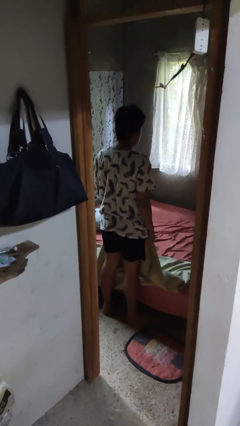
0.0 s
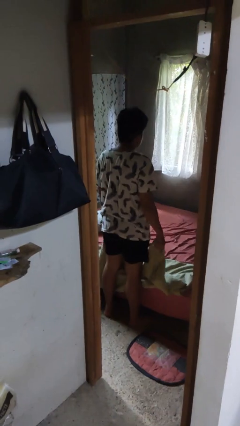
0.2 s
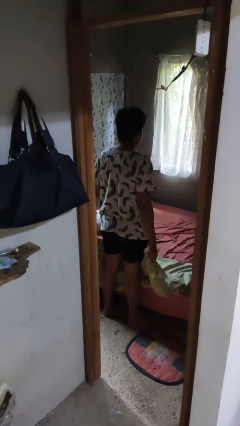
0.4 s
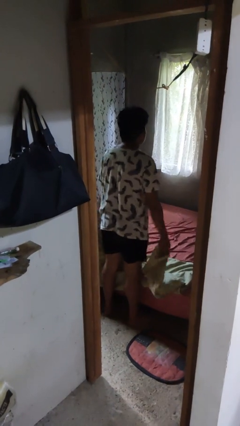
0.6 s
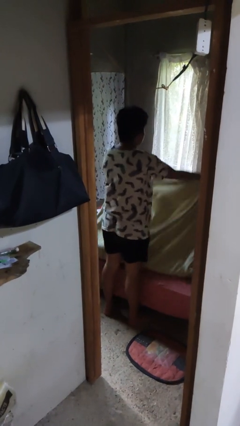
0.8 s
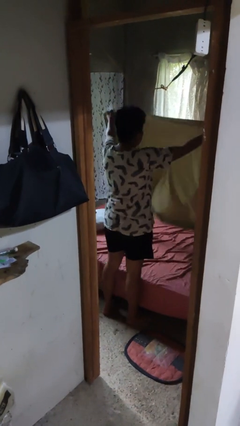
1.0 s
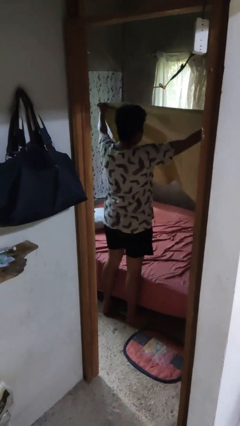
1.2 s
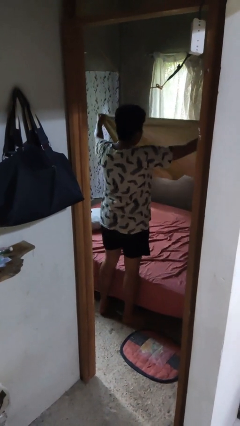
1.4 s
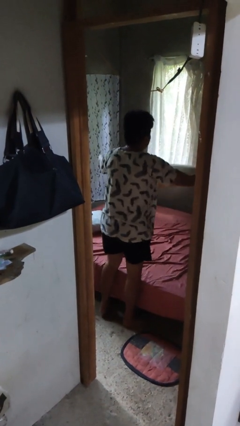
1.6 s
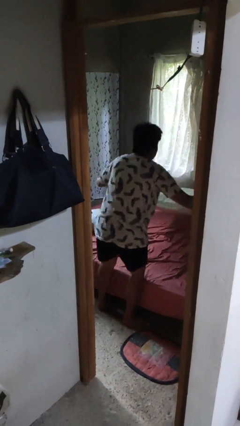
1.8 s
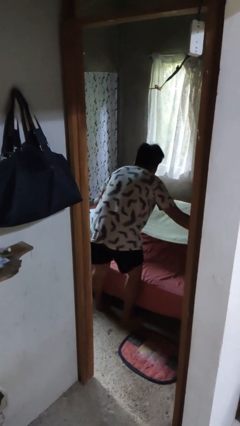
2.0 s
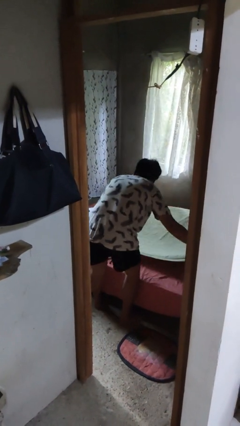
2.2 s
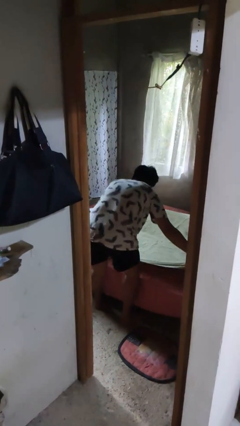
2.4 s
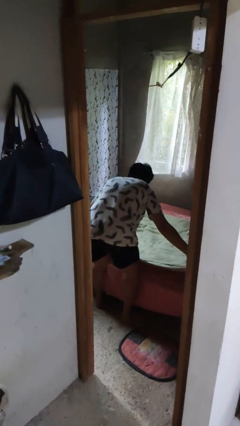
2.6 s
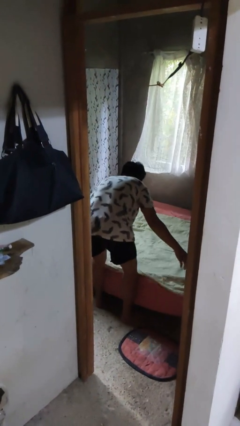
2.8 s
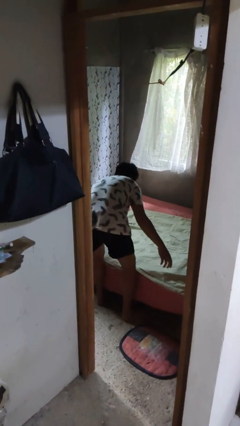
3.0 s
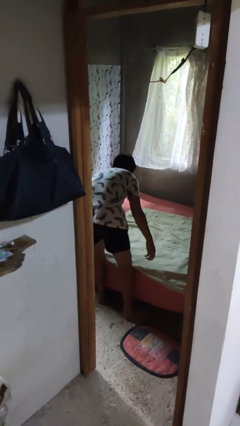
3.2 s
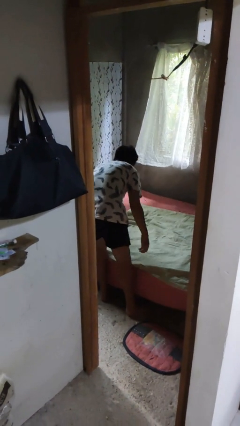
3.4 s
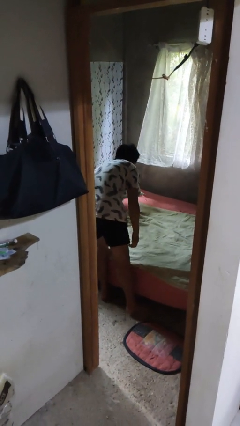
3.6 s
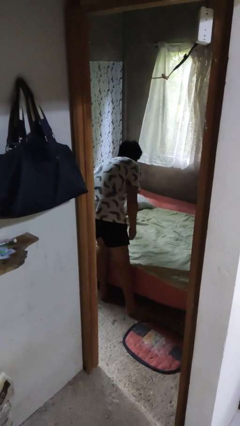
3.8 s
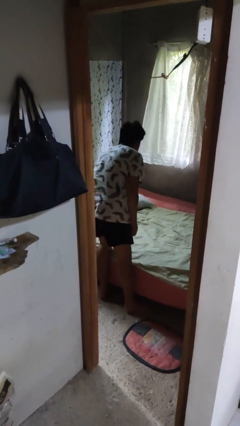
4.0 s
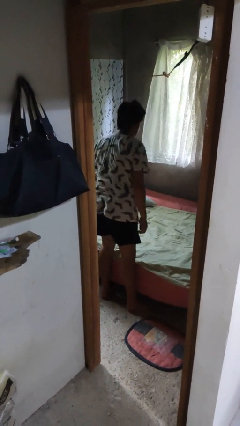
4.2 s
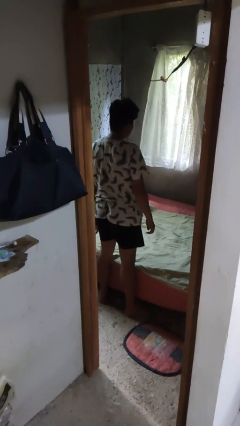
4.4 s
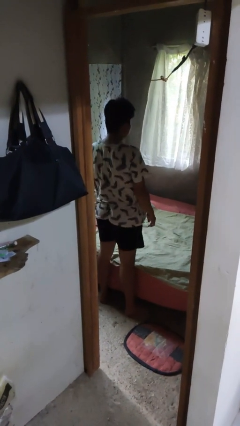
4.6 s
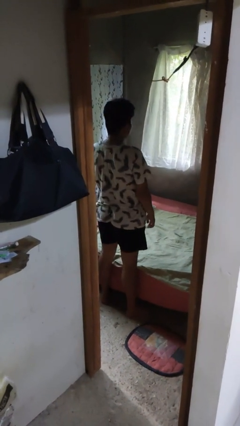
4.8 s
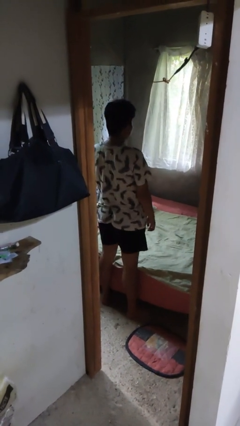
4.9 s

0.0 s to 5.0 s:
person makes bed

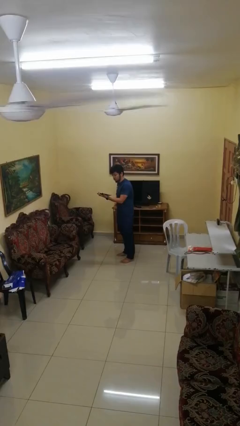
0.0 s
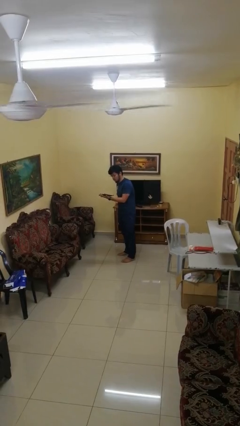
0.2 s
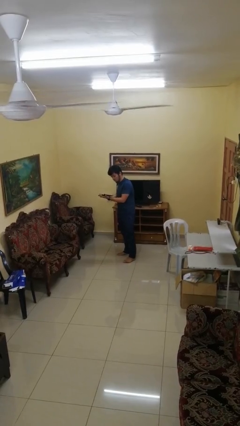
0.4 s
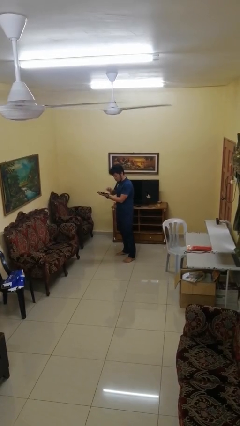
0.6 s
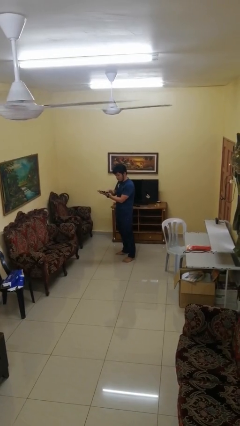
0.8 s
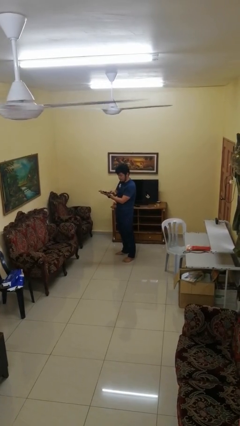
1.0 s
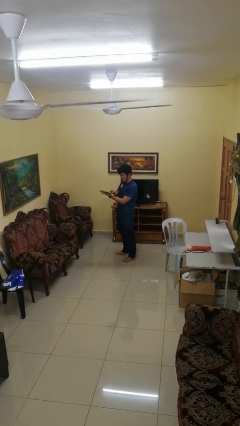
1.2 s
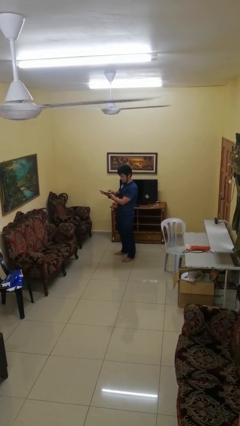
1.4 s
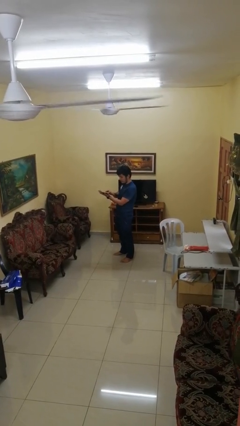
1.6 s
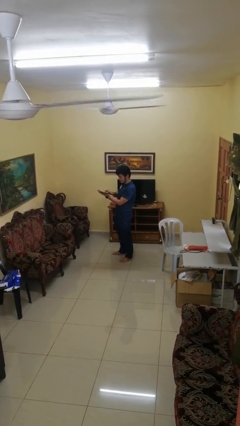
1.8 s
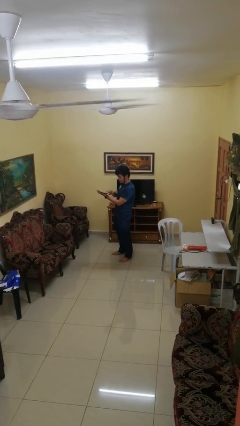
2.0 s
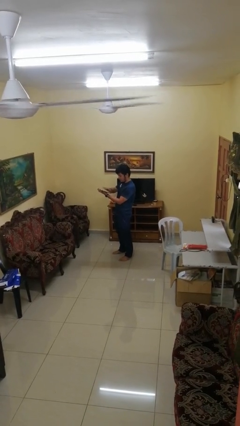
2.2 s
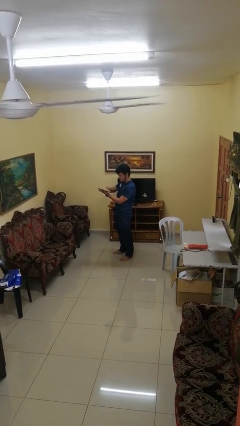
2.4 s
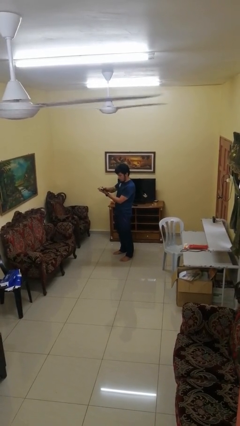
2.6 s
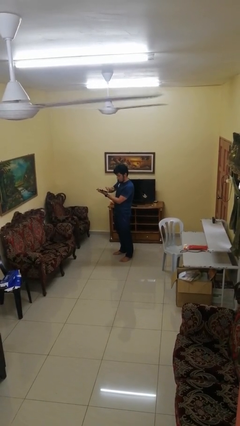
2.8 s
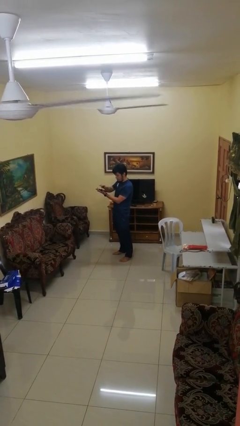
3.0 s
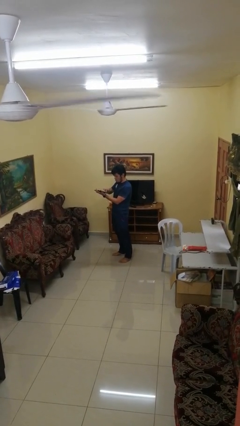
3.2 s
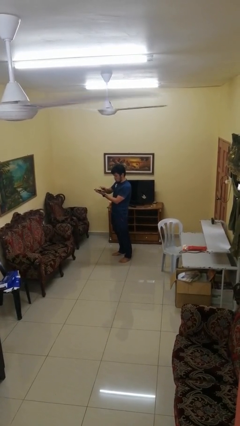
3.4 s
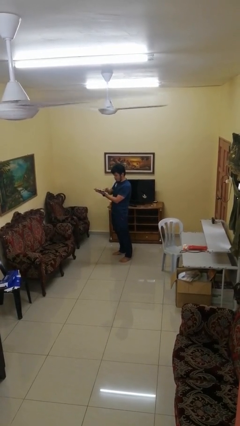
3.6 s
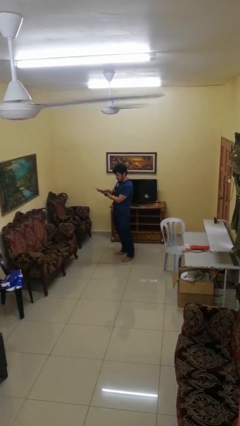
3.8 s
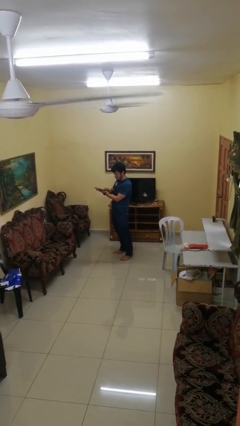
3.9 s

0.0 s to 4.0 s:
person interacts with tablet

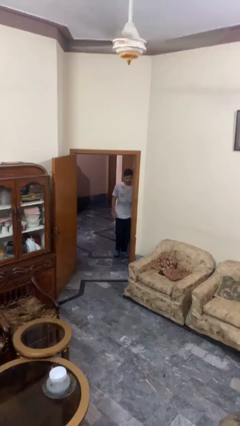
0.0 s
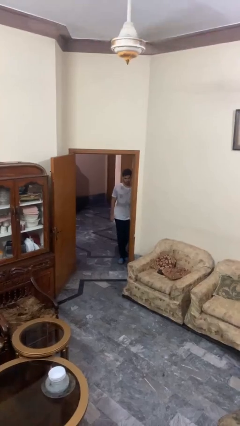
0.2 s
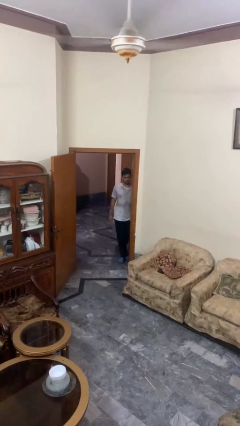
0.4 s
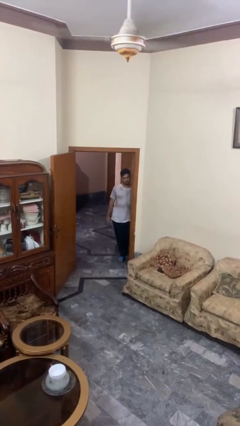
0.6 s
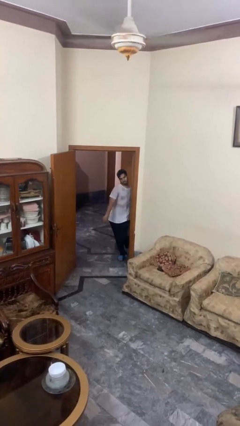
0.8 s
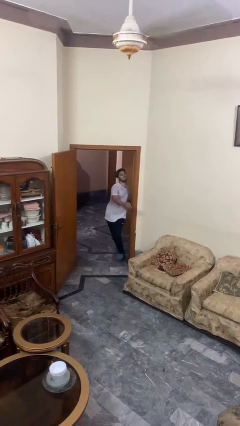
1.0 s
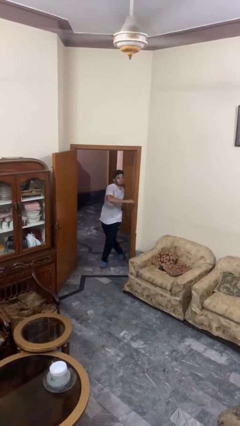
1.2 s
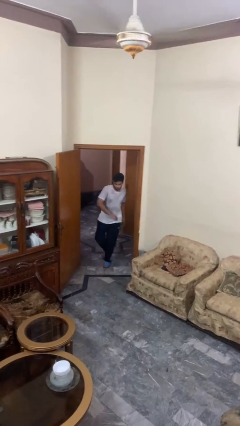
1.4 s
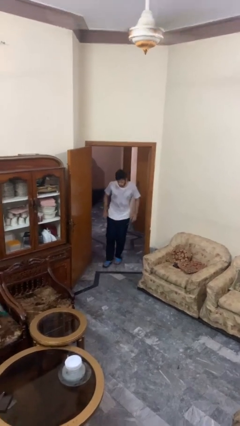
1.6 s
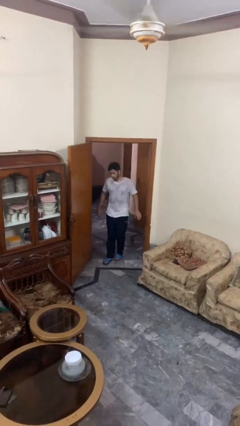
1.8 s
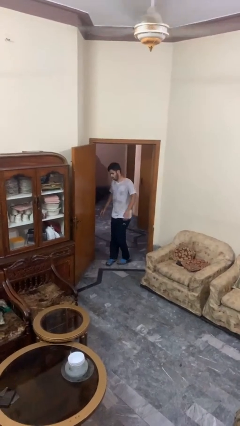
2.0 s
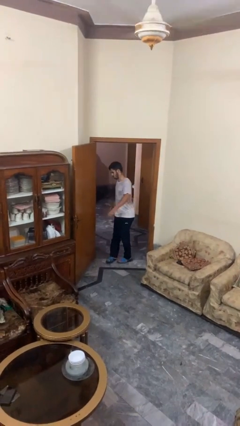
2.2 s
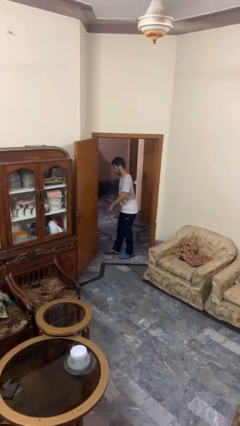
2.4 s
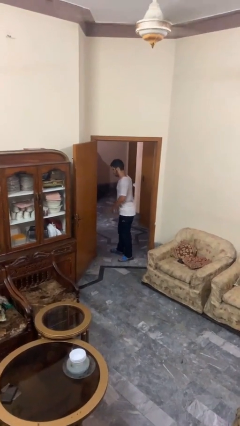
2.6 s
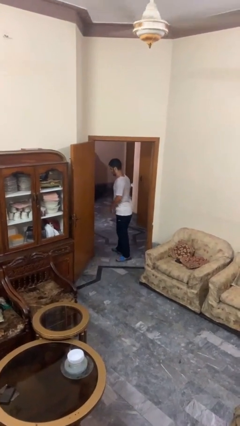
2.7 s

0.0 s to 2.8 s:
person bumps into wall

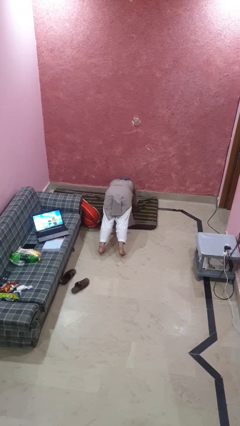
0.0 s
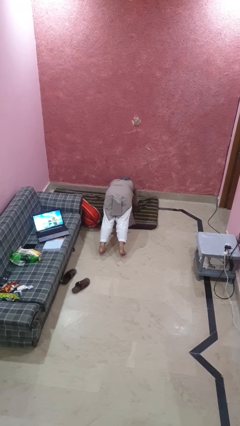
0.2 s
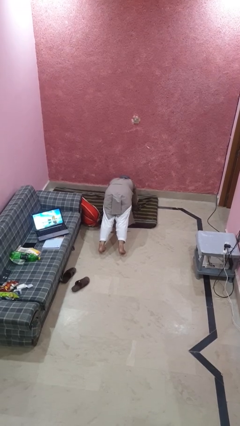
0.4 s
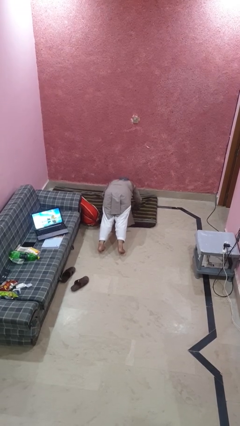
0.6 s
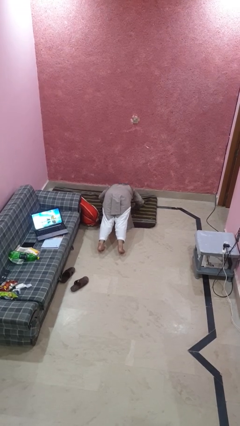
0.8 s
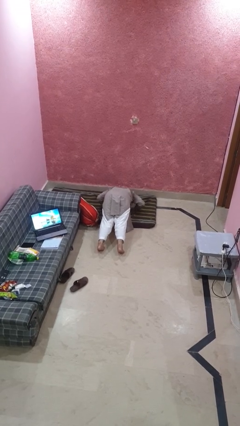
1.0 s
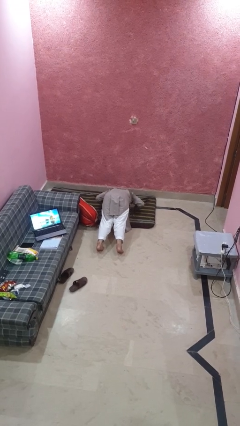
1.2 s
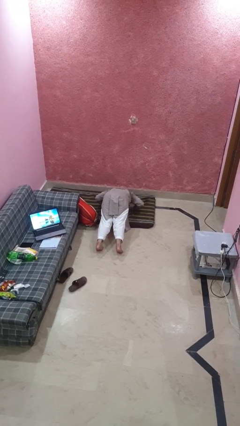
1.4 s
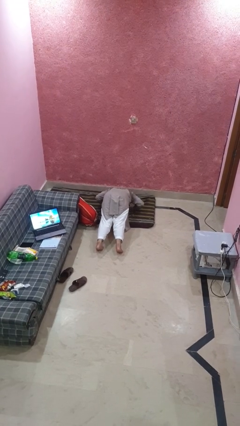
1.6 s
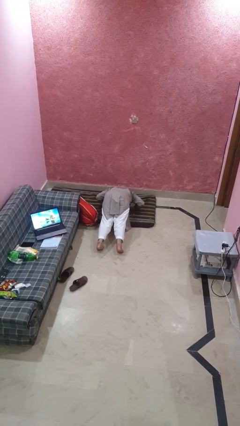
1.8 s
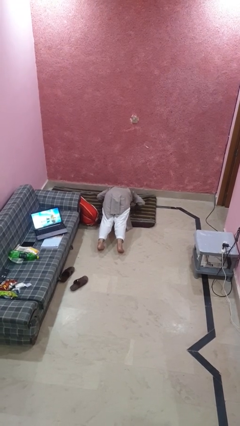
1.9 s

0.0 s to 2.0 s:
person exercises with pushup

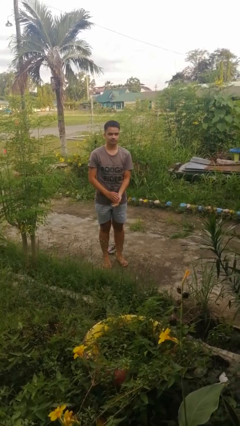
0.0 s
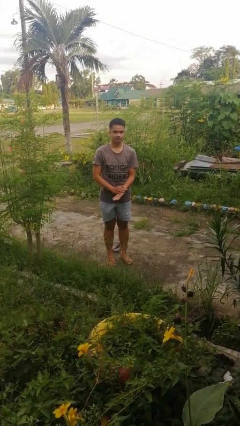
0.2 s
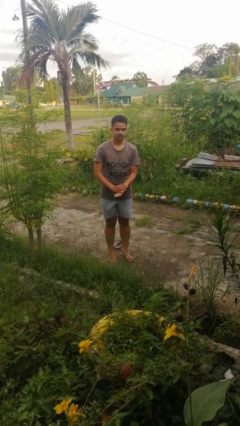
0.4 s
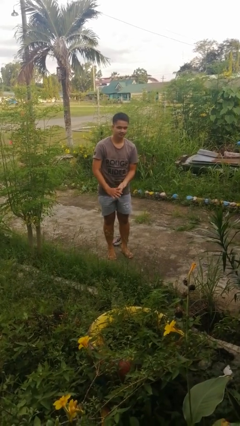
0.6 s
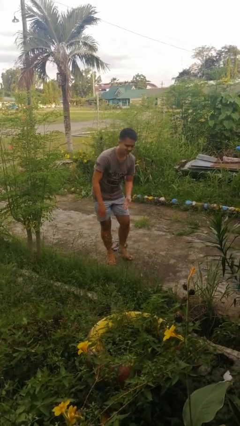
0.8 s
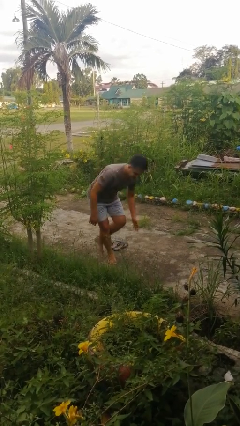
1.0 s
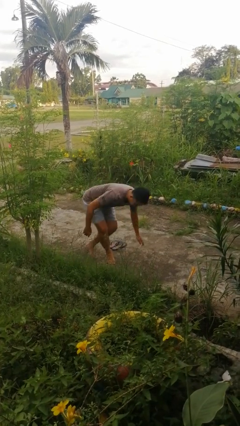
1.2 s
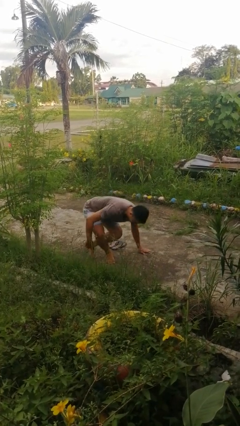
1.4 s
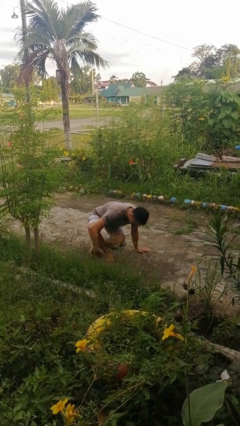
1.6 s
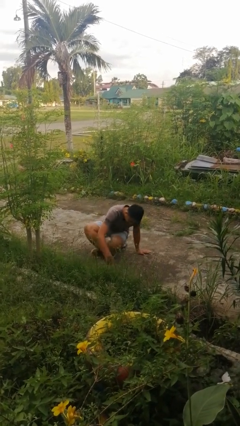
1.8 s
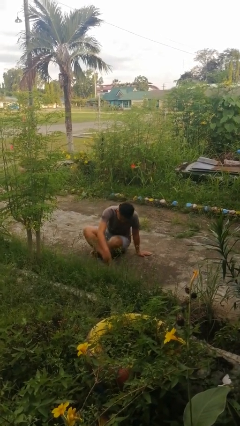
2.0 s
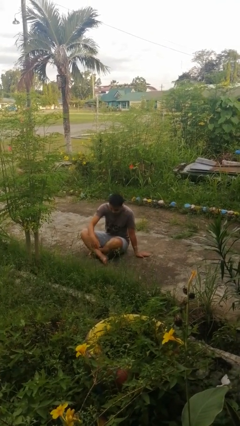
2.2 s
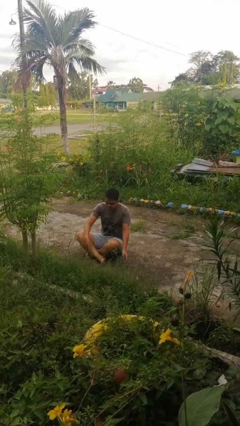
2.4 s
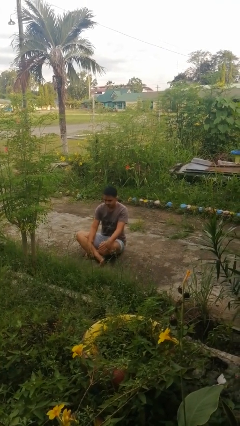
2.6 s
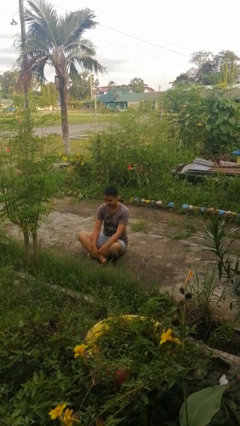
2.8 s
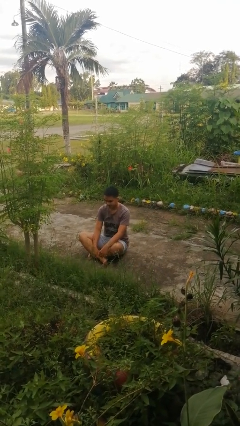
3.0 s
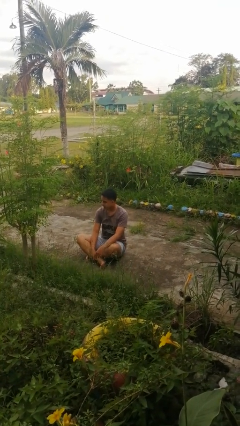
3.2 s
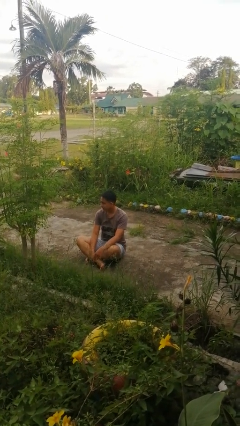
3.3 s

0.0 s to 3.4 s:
person sits crisscross

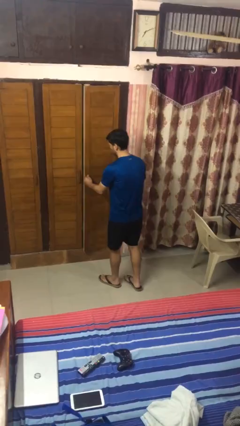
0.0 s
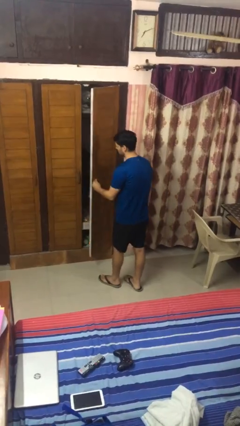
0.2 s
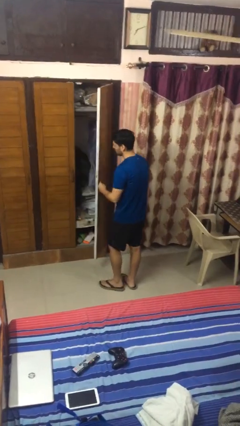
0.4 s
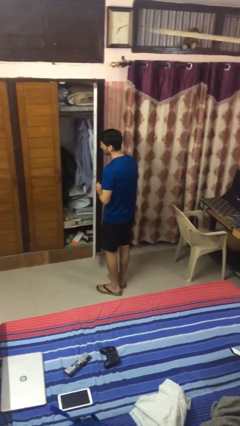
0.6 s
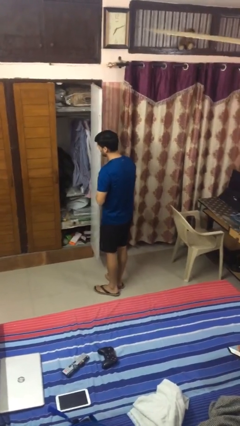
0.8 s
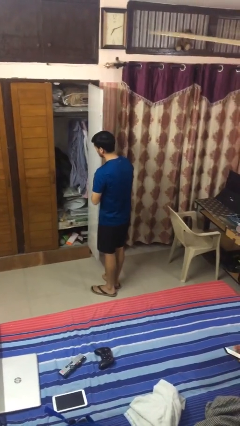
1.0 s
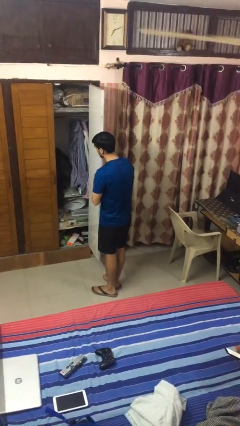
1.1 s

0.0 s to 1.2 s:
person opens facility door
